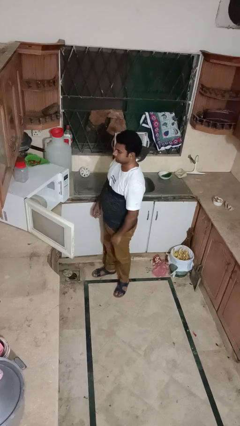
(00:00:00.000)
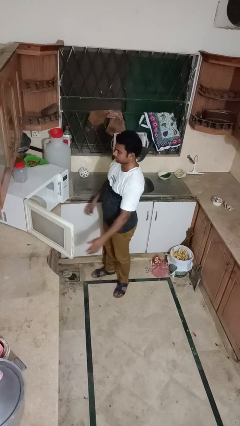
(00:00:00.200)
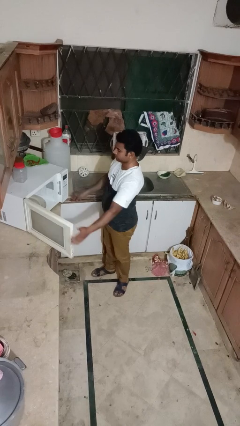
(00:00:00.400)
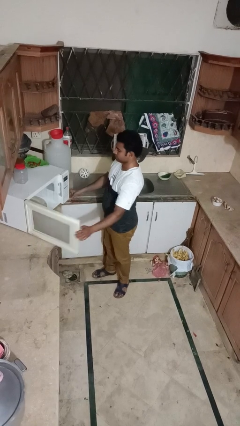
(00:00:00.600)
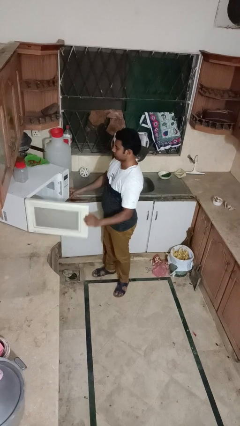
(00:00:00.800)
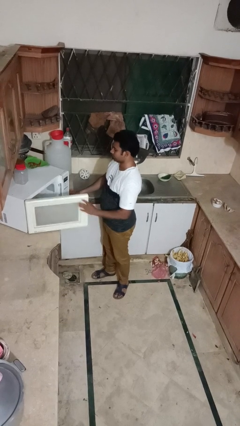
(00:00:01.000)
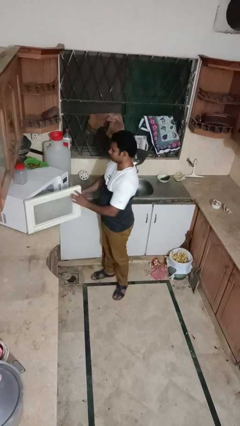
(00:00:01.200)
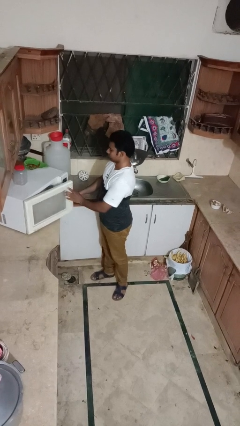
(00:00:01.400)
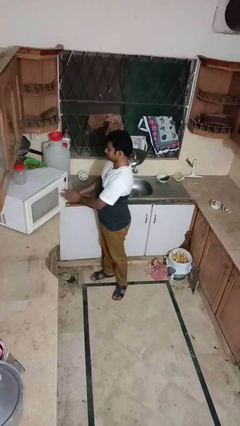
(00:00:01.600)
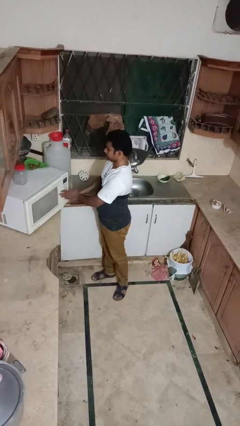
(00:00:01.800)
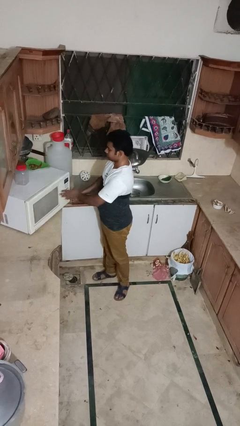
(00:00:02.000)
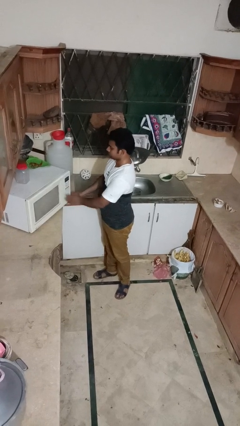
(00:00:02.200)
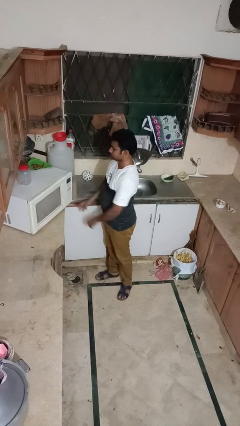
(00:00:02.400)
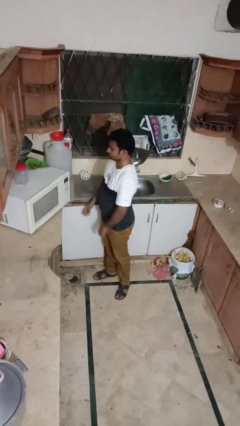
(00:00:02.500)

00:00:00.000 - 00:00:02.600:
person closes oven door

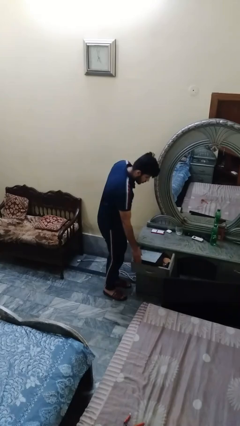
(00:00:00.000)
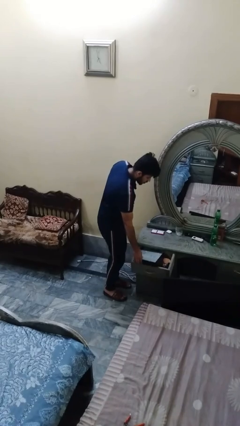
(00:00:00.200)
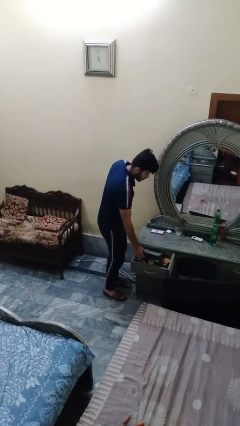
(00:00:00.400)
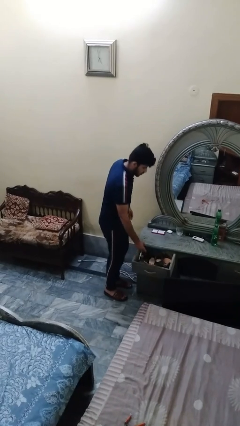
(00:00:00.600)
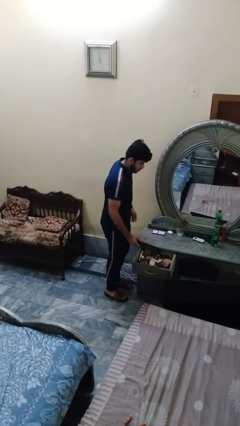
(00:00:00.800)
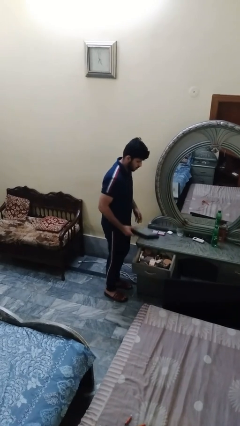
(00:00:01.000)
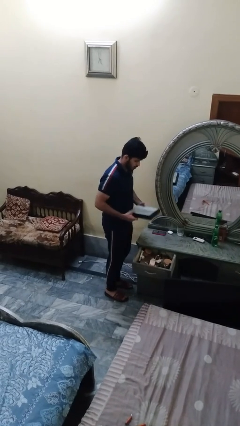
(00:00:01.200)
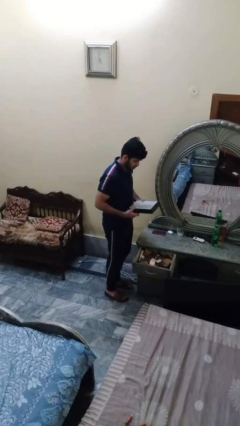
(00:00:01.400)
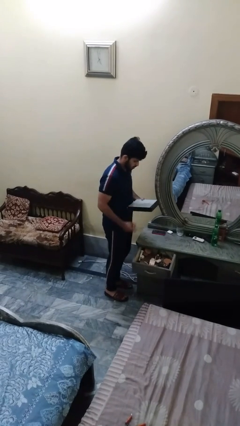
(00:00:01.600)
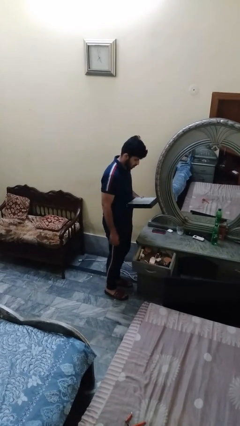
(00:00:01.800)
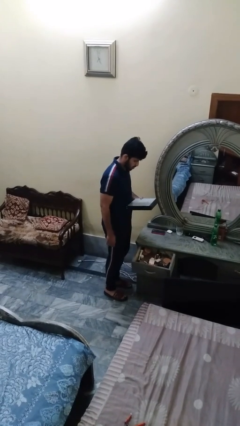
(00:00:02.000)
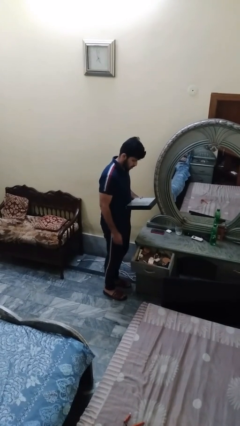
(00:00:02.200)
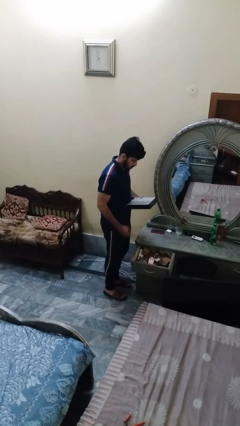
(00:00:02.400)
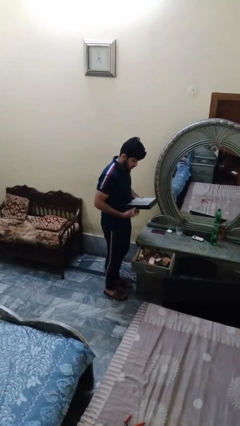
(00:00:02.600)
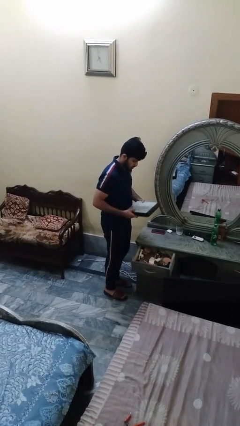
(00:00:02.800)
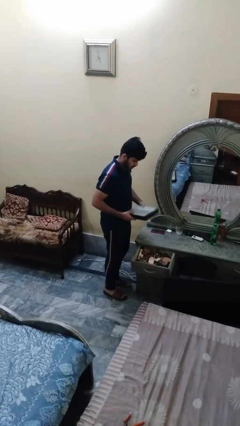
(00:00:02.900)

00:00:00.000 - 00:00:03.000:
person picks up object from cabinet

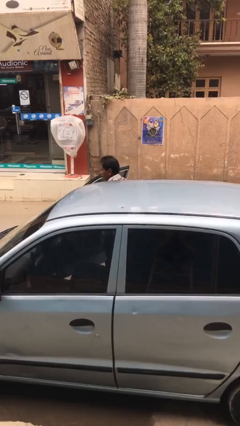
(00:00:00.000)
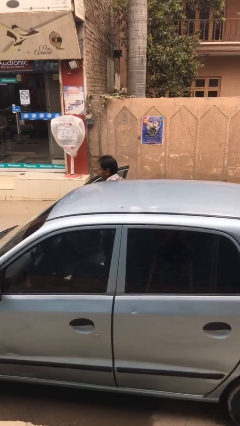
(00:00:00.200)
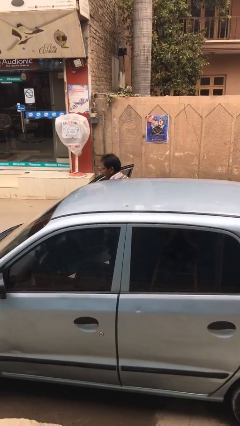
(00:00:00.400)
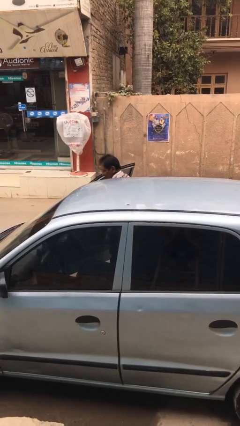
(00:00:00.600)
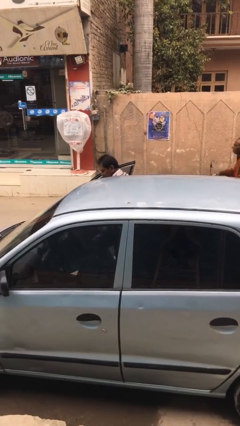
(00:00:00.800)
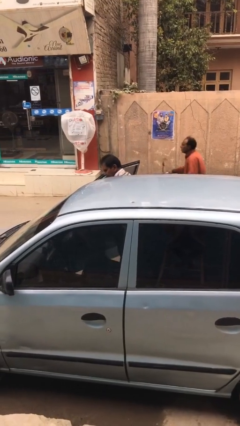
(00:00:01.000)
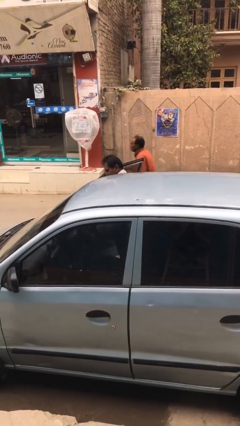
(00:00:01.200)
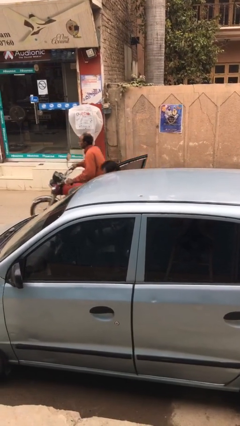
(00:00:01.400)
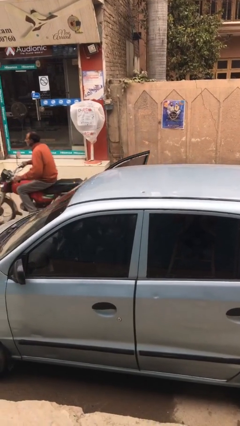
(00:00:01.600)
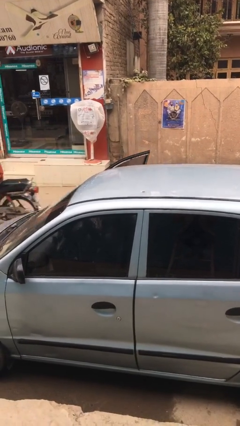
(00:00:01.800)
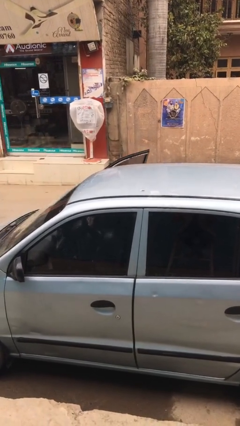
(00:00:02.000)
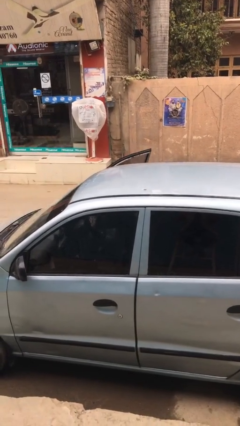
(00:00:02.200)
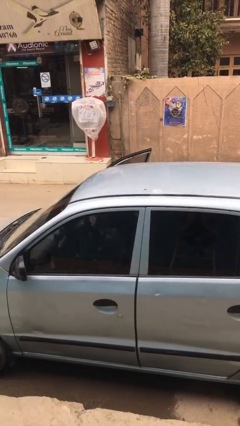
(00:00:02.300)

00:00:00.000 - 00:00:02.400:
person enters car

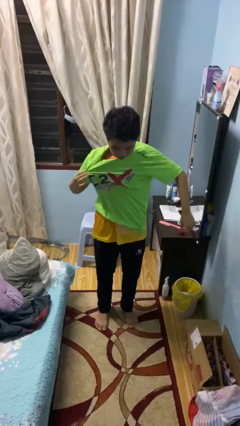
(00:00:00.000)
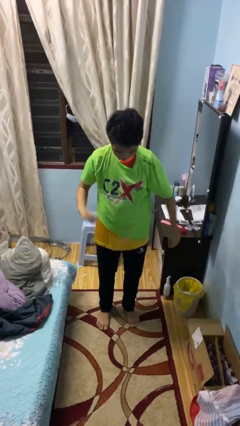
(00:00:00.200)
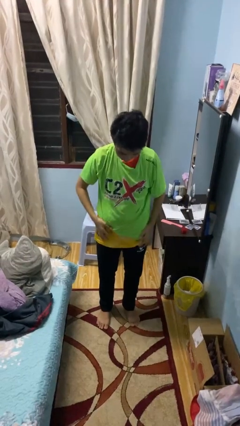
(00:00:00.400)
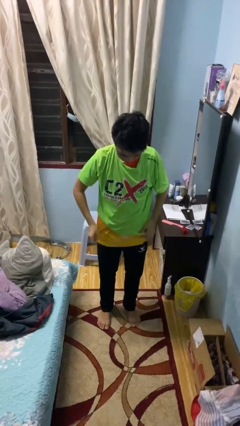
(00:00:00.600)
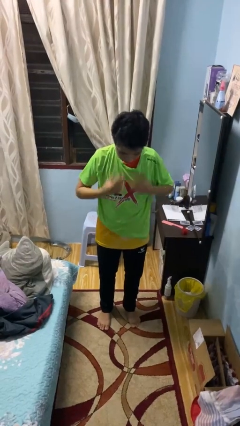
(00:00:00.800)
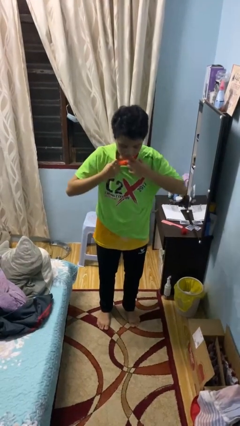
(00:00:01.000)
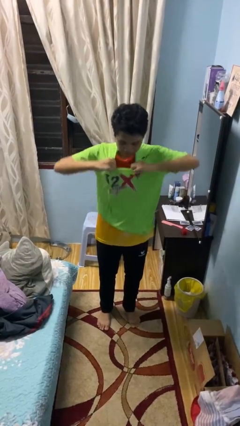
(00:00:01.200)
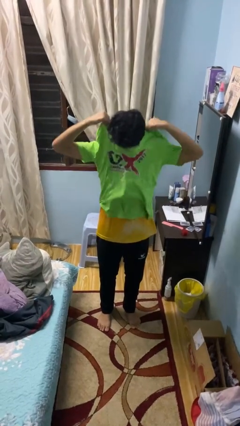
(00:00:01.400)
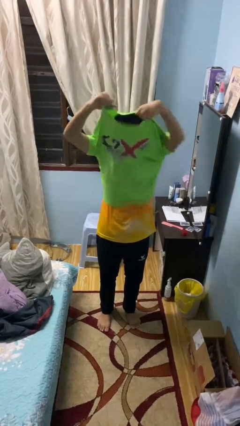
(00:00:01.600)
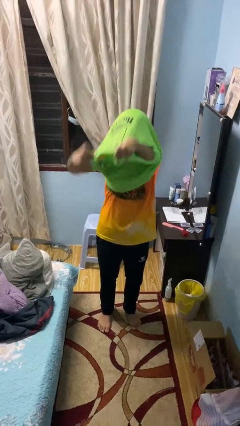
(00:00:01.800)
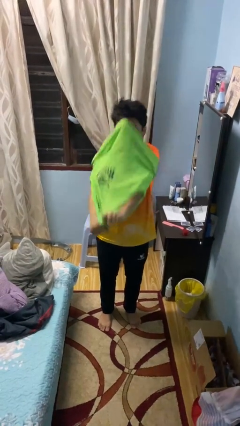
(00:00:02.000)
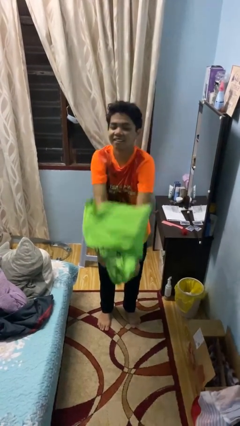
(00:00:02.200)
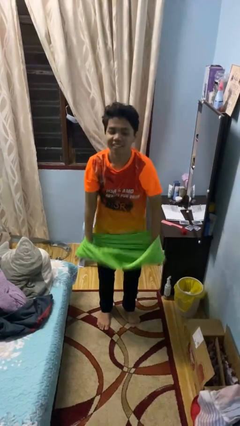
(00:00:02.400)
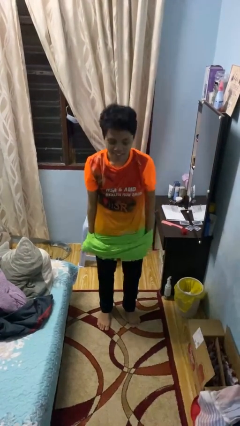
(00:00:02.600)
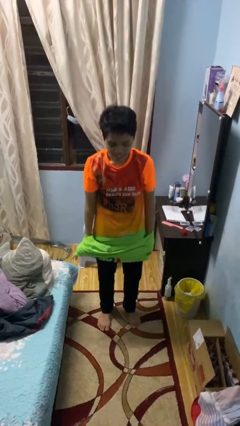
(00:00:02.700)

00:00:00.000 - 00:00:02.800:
person takes off shirt

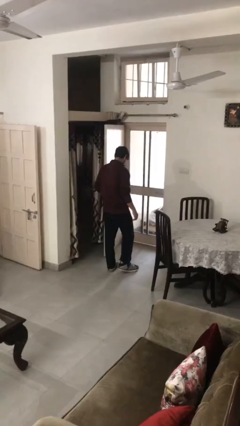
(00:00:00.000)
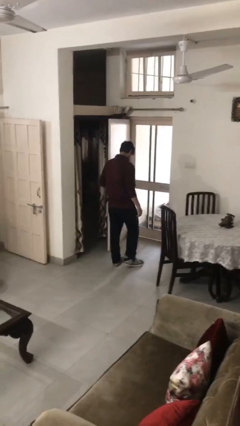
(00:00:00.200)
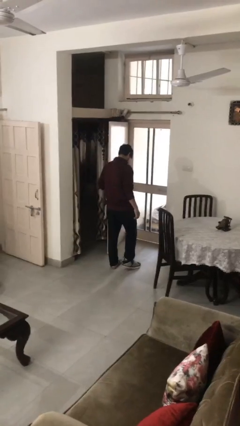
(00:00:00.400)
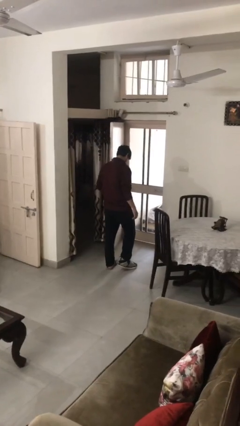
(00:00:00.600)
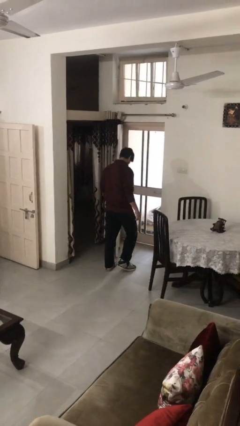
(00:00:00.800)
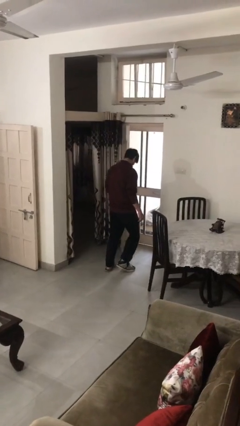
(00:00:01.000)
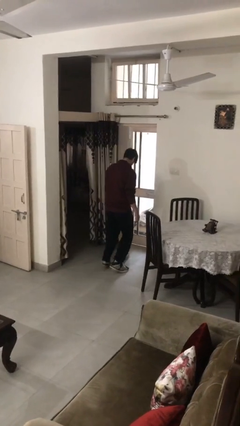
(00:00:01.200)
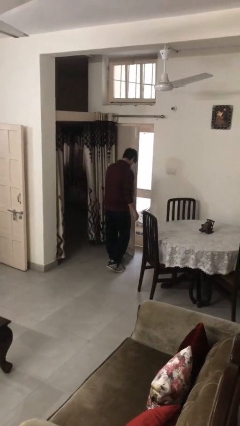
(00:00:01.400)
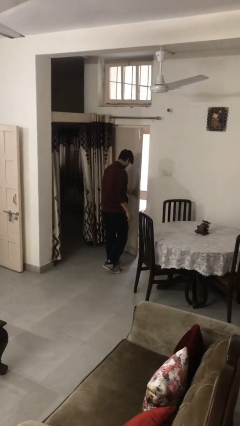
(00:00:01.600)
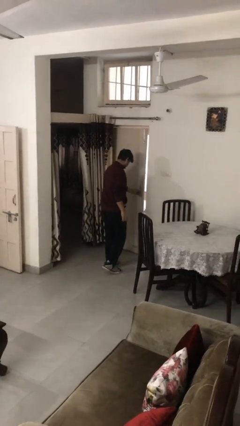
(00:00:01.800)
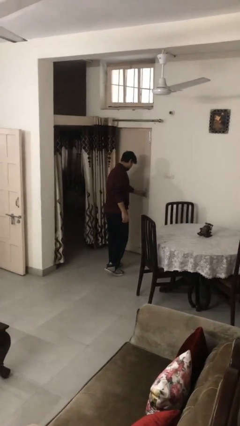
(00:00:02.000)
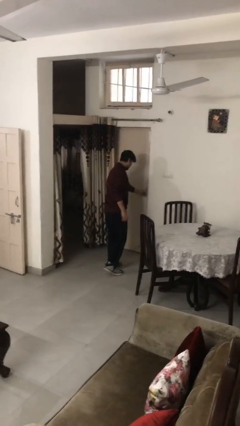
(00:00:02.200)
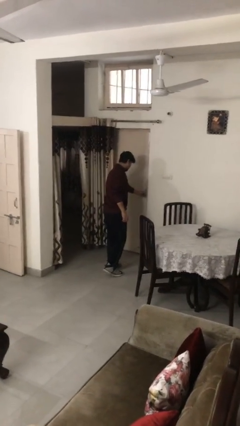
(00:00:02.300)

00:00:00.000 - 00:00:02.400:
person closes facility door

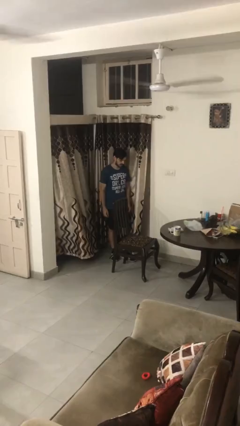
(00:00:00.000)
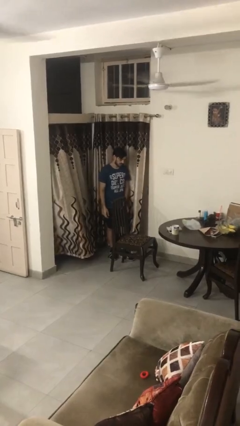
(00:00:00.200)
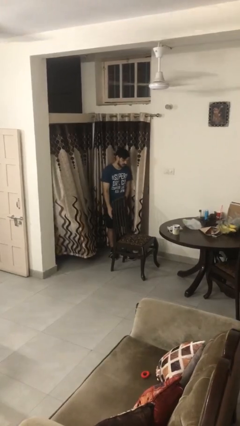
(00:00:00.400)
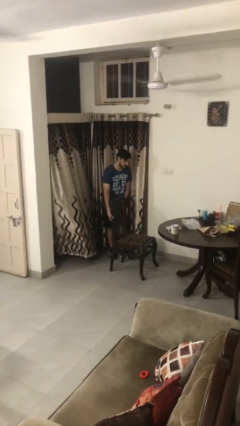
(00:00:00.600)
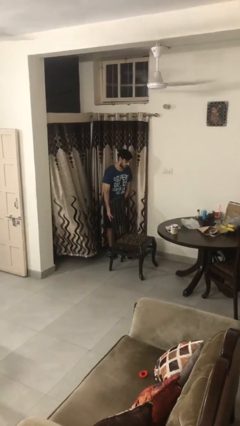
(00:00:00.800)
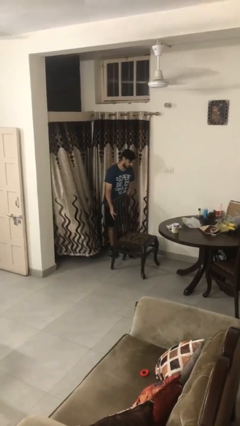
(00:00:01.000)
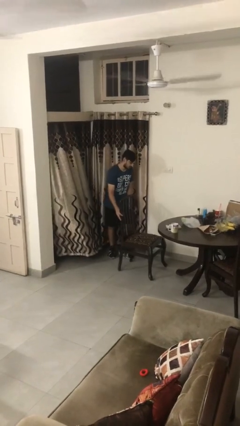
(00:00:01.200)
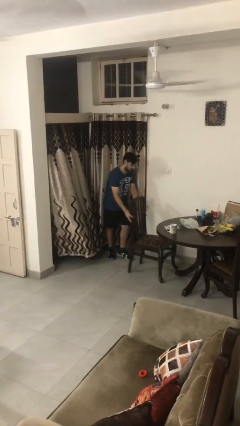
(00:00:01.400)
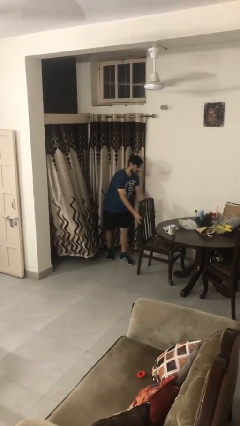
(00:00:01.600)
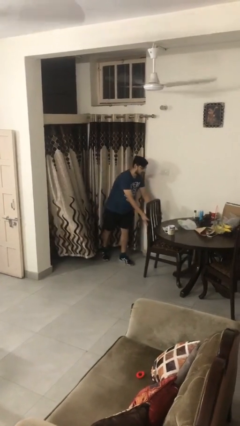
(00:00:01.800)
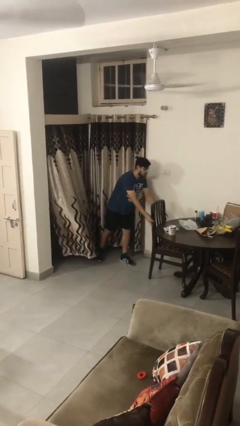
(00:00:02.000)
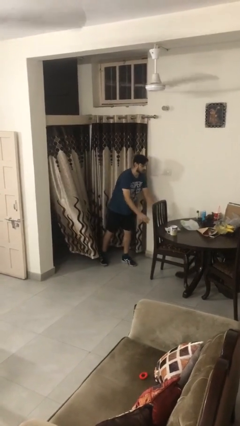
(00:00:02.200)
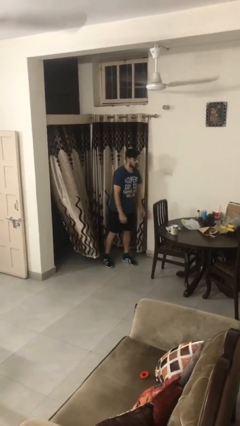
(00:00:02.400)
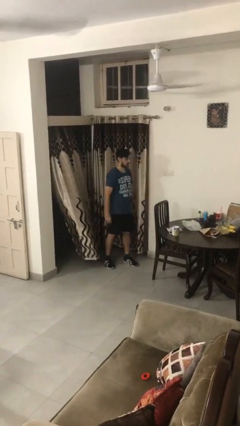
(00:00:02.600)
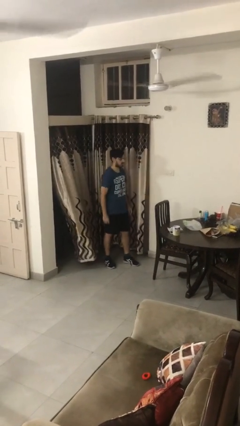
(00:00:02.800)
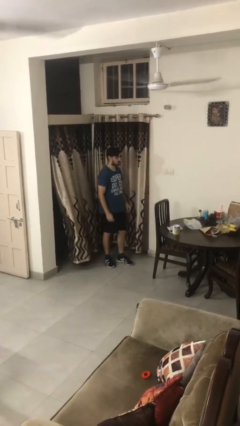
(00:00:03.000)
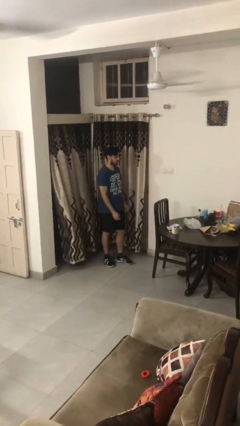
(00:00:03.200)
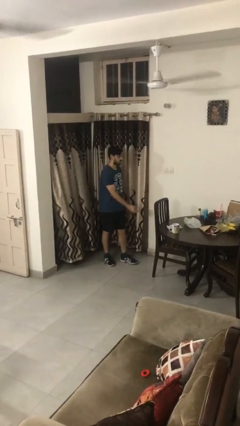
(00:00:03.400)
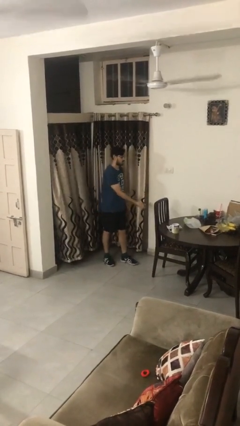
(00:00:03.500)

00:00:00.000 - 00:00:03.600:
person pushes in chair

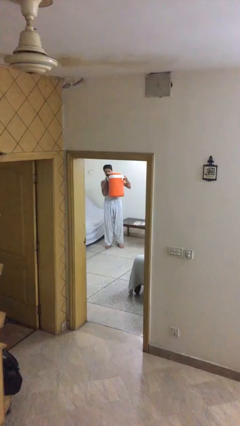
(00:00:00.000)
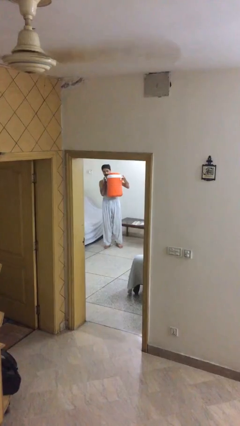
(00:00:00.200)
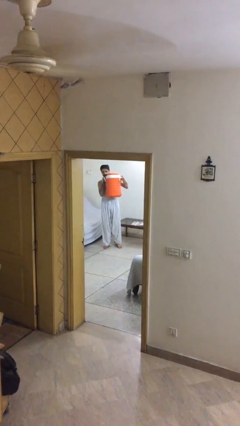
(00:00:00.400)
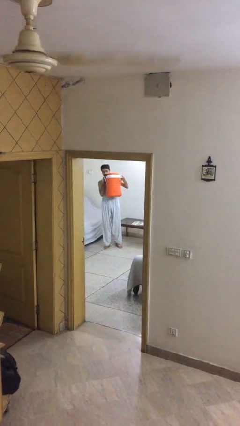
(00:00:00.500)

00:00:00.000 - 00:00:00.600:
person carries heavy object
